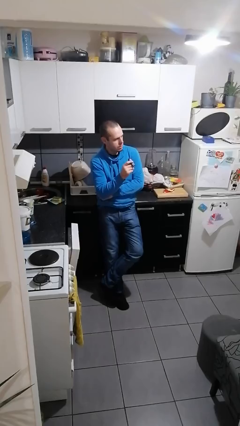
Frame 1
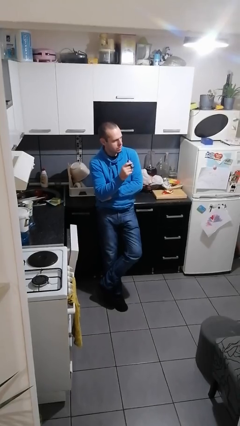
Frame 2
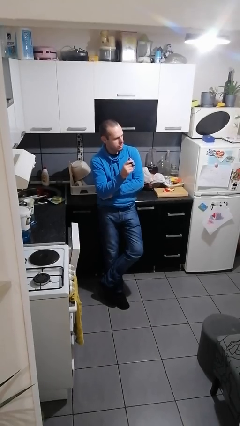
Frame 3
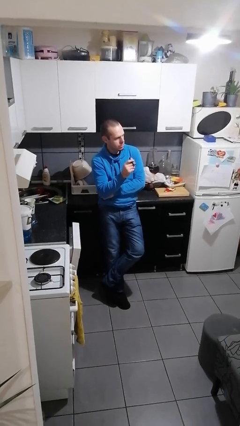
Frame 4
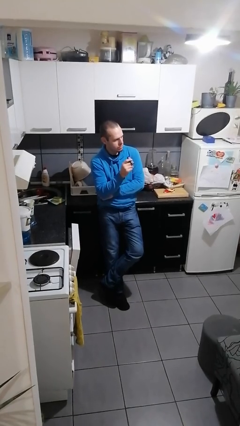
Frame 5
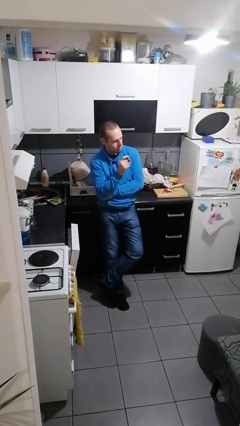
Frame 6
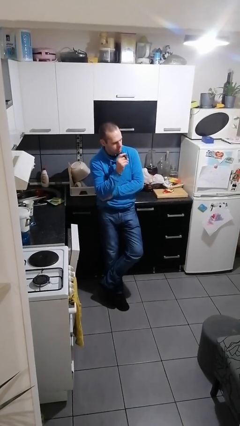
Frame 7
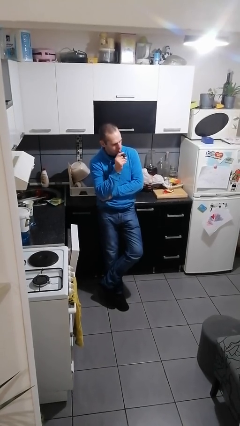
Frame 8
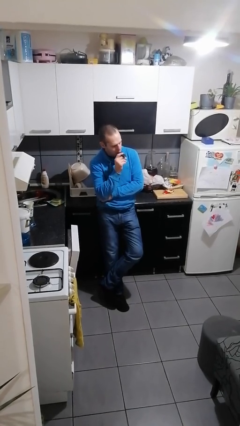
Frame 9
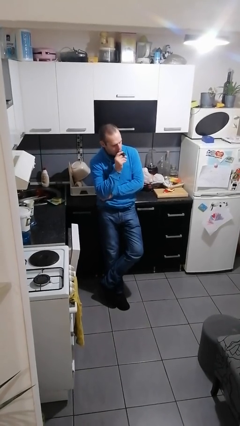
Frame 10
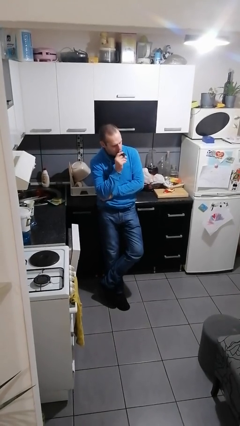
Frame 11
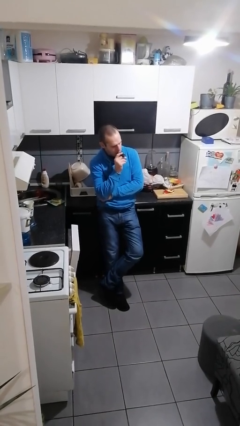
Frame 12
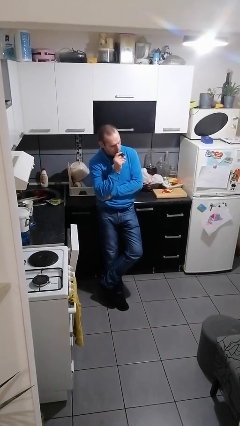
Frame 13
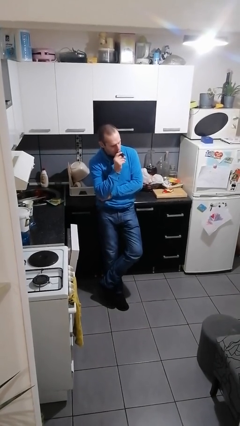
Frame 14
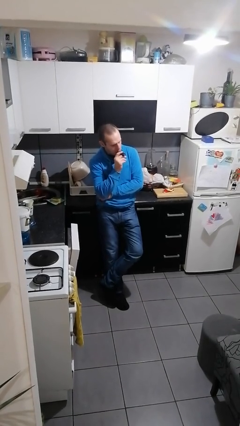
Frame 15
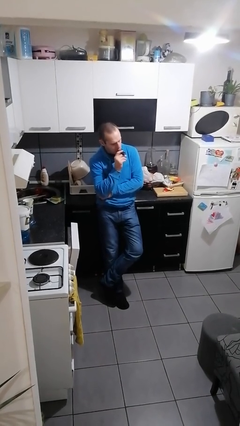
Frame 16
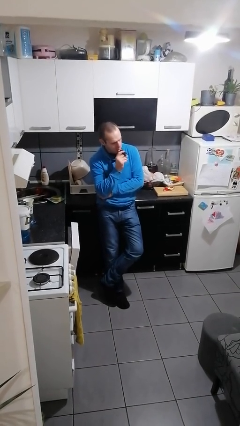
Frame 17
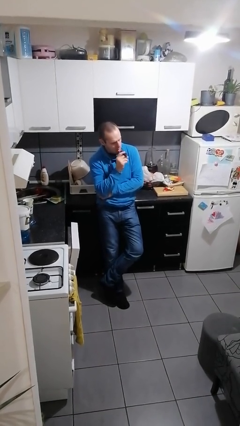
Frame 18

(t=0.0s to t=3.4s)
person vapes

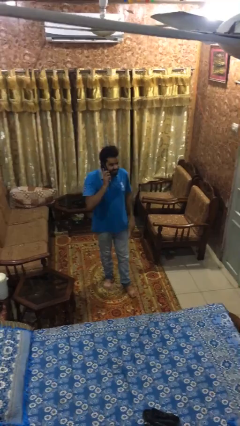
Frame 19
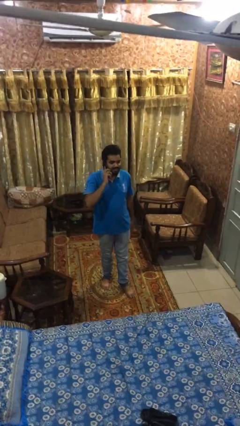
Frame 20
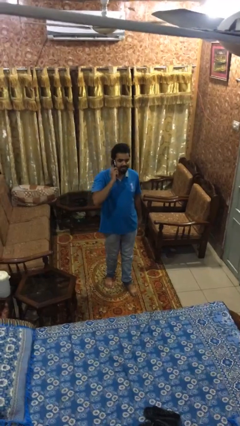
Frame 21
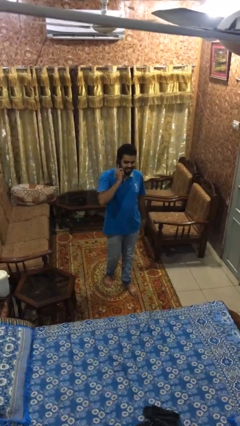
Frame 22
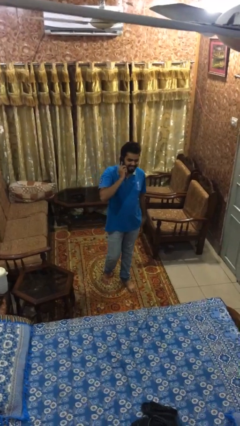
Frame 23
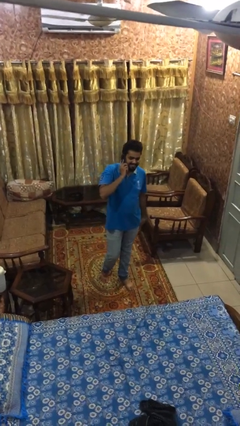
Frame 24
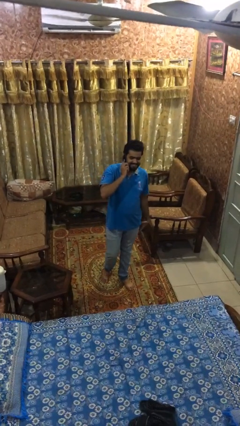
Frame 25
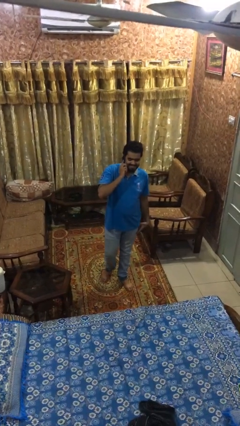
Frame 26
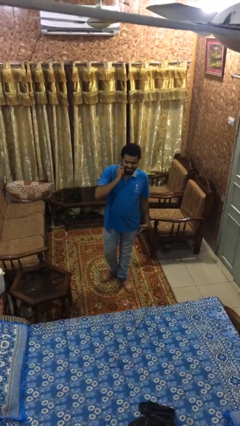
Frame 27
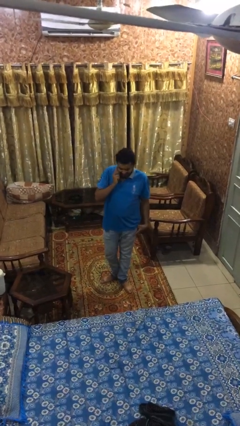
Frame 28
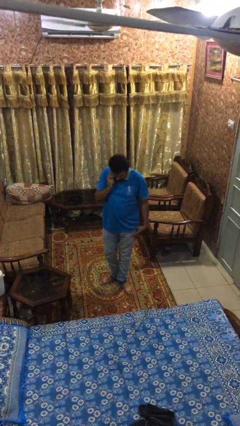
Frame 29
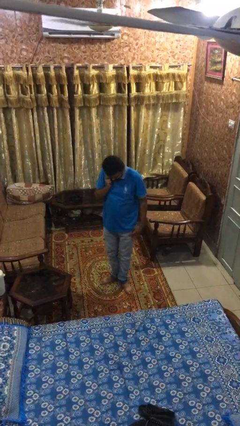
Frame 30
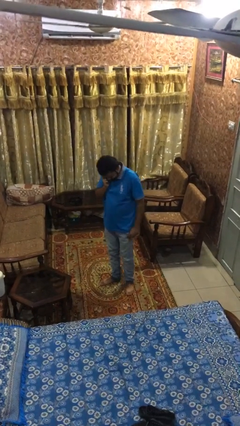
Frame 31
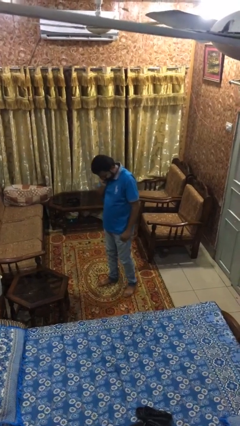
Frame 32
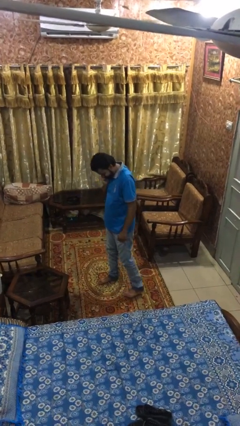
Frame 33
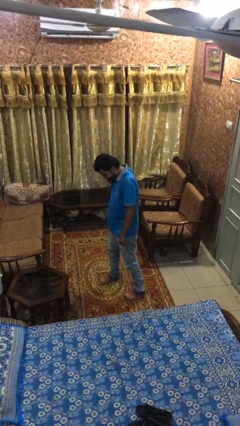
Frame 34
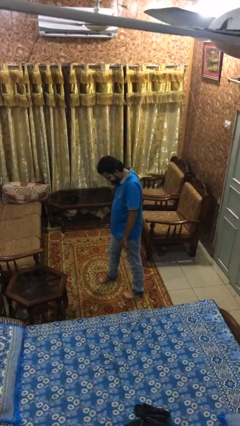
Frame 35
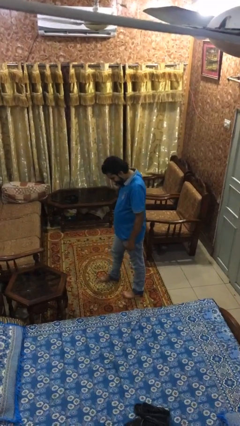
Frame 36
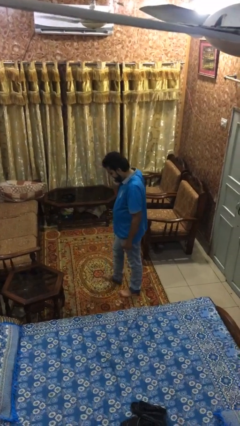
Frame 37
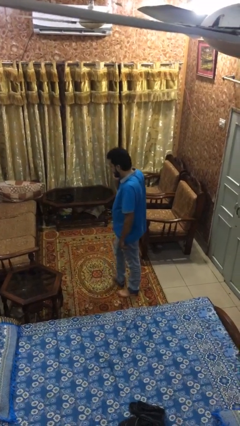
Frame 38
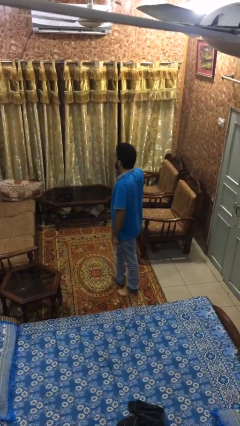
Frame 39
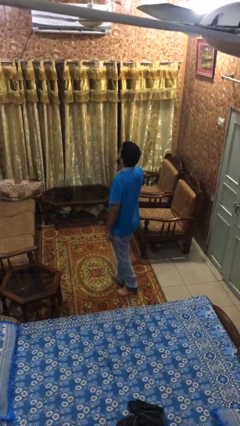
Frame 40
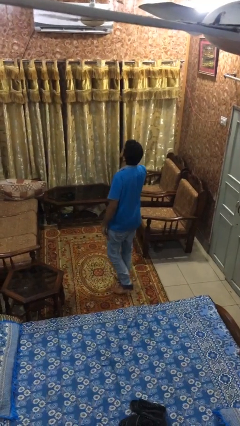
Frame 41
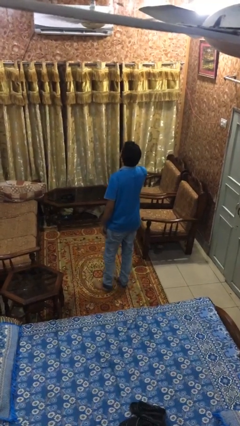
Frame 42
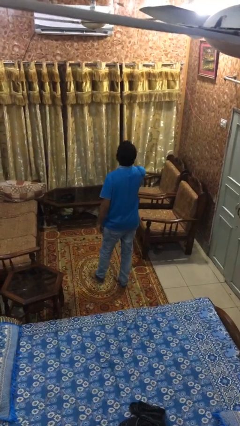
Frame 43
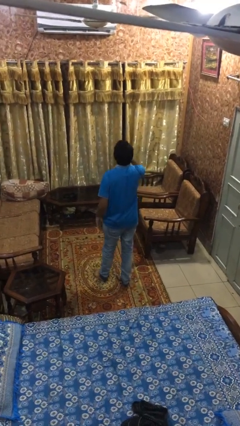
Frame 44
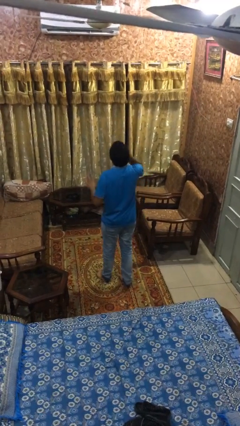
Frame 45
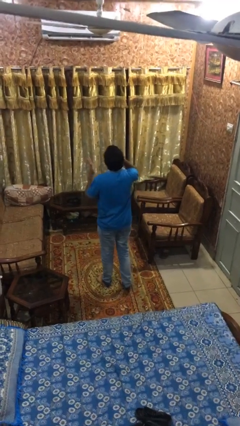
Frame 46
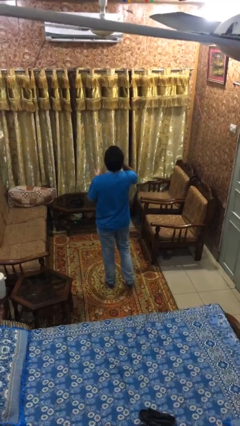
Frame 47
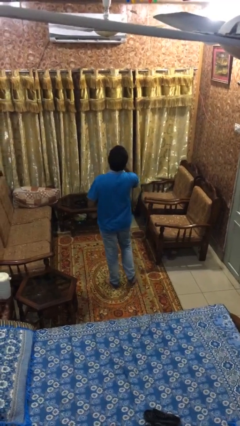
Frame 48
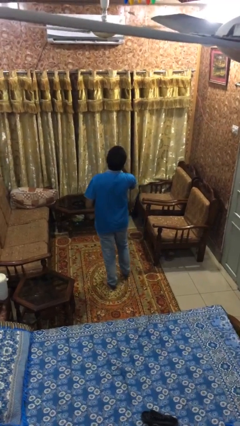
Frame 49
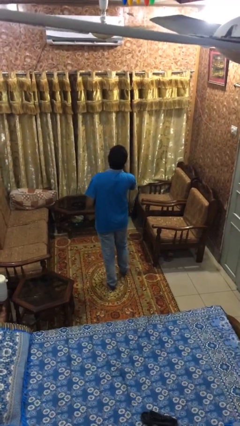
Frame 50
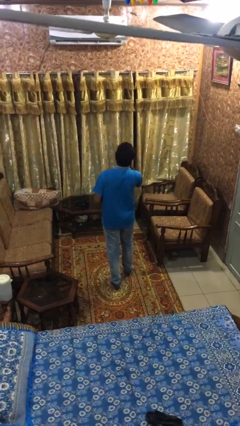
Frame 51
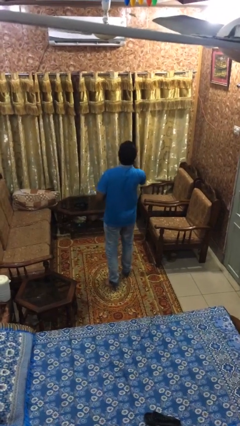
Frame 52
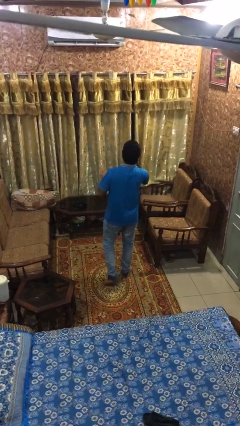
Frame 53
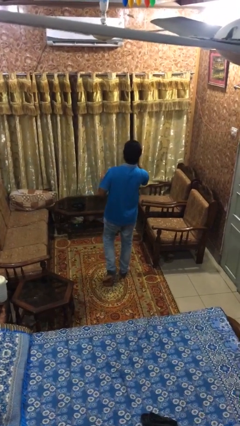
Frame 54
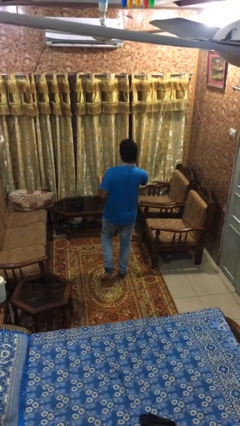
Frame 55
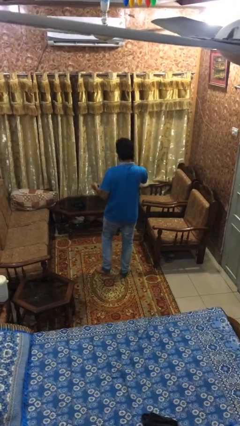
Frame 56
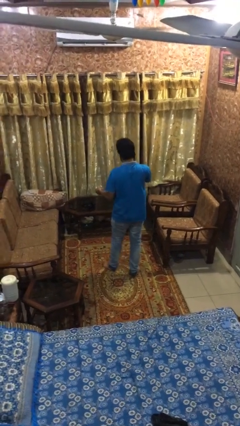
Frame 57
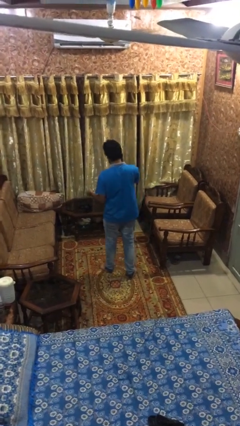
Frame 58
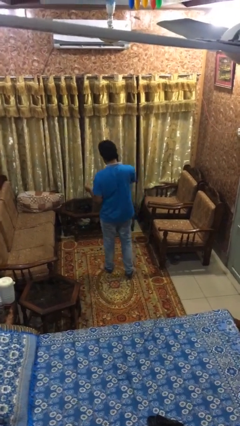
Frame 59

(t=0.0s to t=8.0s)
person talks on phone

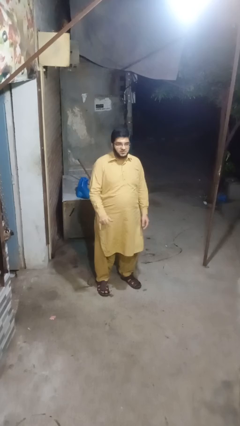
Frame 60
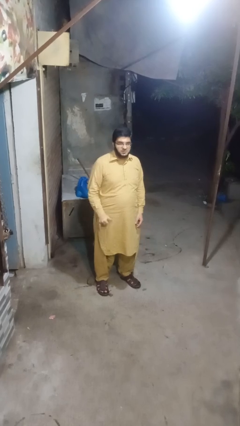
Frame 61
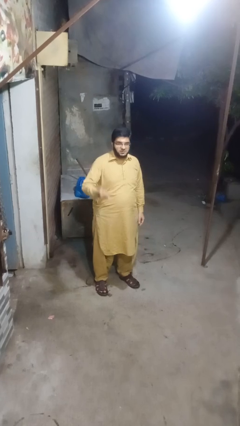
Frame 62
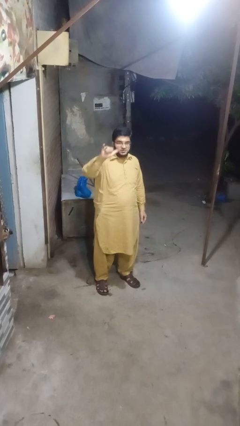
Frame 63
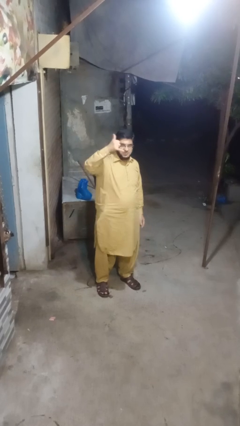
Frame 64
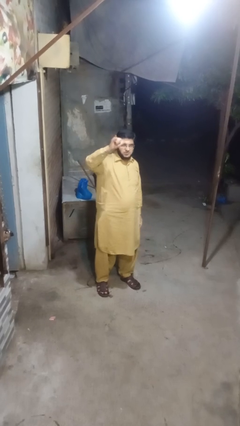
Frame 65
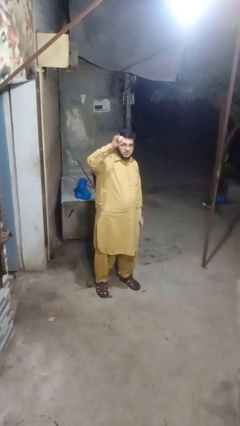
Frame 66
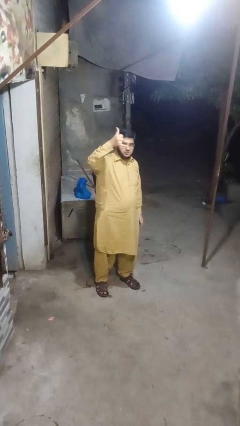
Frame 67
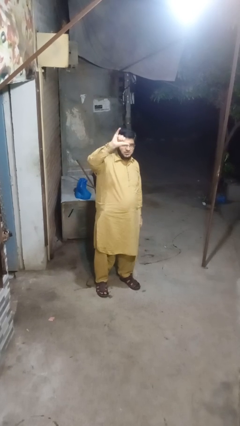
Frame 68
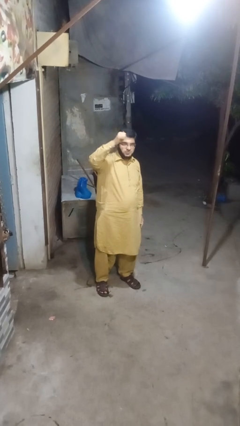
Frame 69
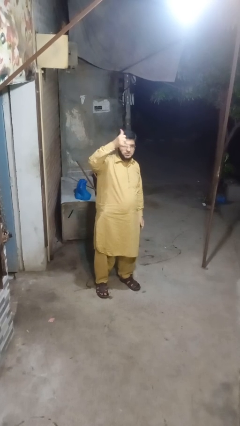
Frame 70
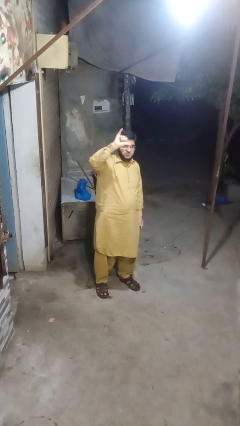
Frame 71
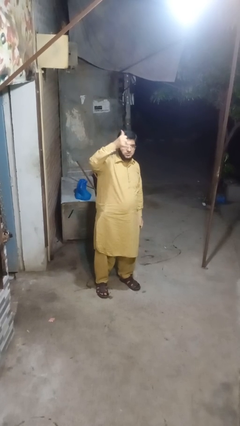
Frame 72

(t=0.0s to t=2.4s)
person gestures hang loose

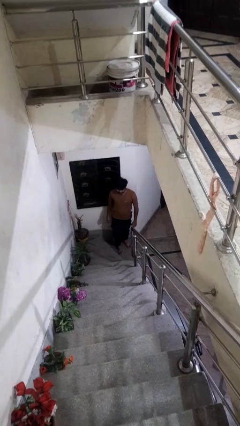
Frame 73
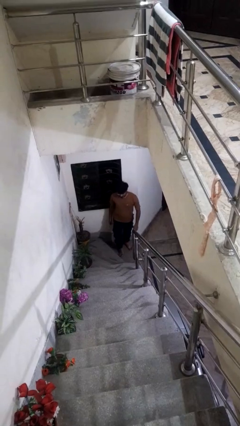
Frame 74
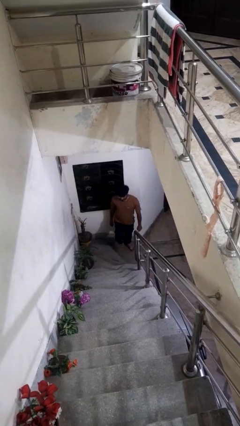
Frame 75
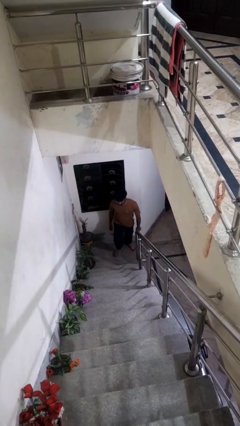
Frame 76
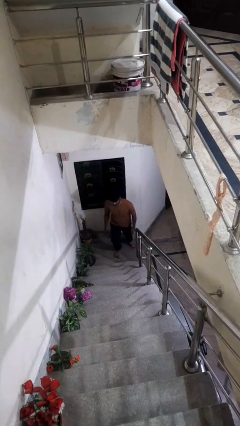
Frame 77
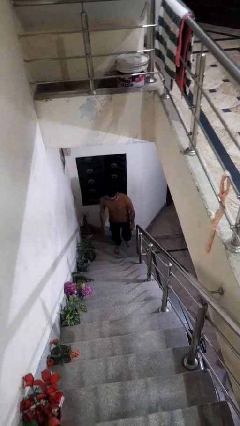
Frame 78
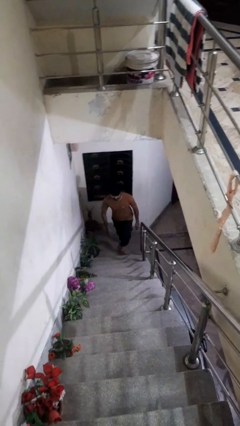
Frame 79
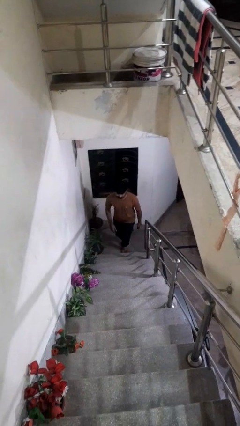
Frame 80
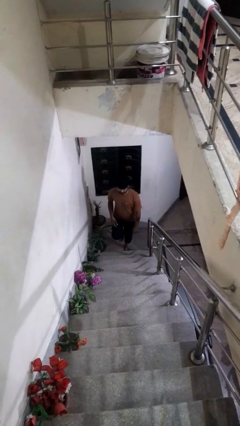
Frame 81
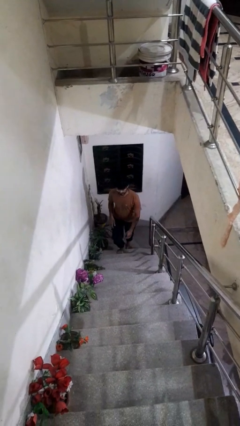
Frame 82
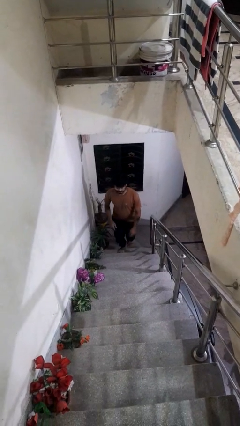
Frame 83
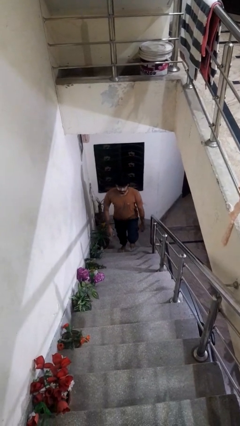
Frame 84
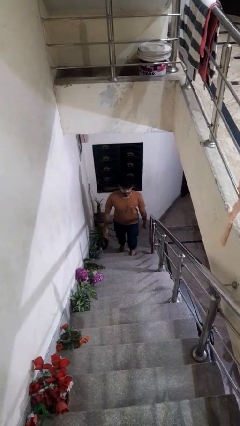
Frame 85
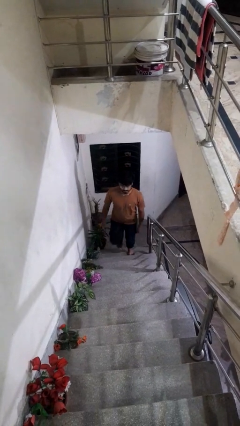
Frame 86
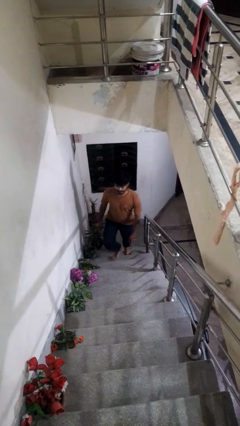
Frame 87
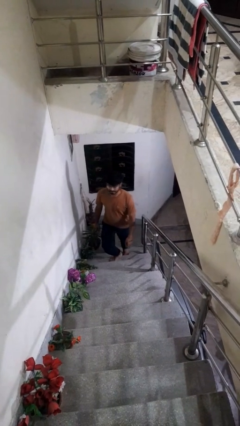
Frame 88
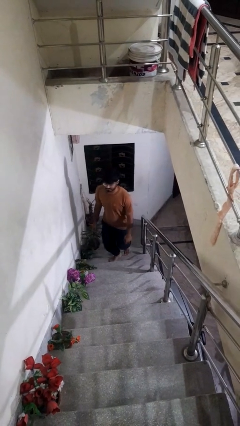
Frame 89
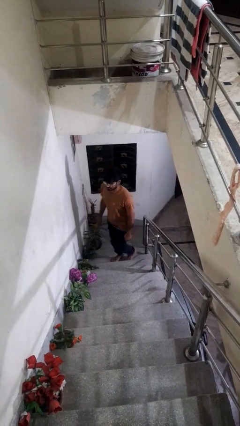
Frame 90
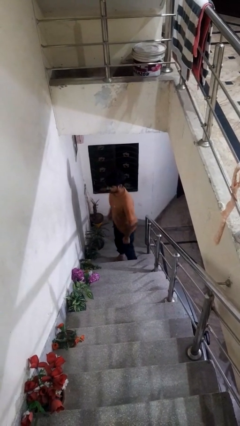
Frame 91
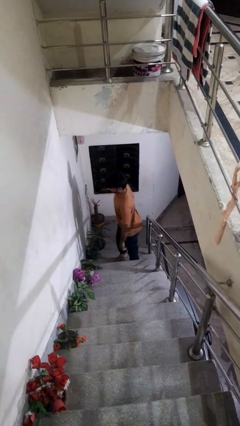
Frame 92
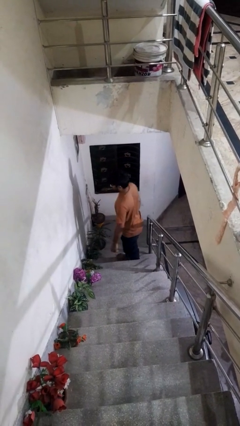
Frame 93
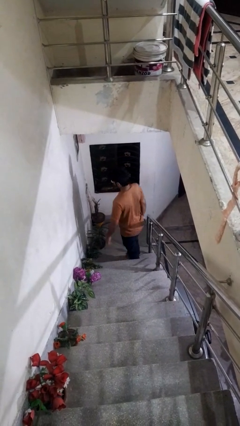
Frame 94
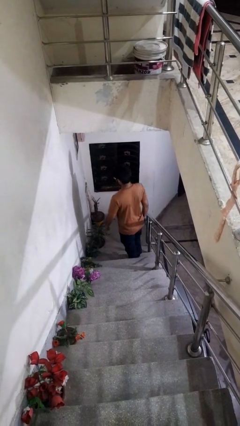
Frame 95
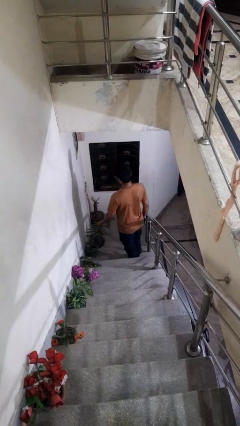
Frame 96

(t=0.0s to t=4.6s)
person climbs up stairs
